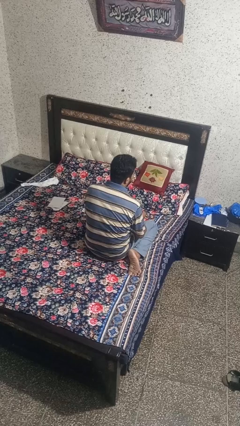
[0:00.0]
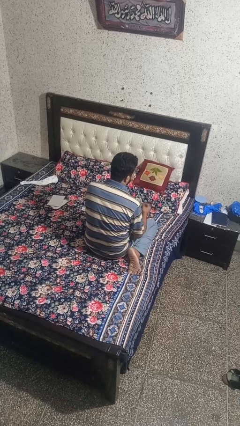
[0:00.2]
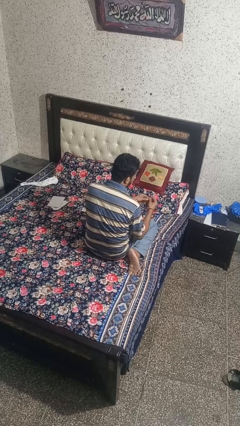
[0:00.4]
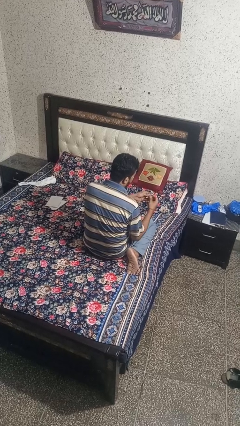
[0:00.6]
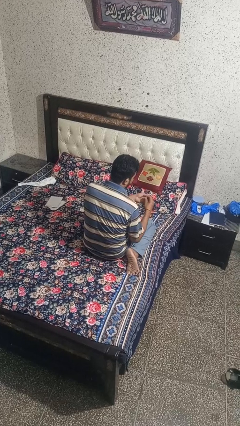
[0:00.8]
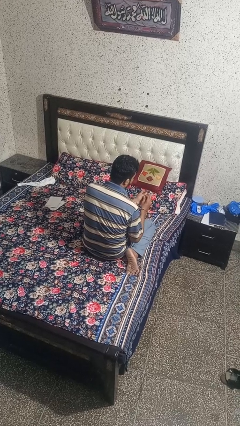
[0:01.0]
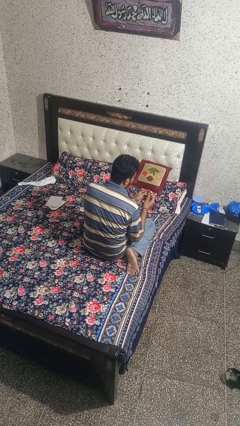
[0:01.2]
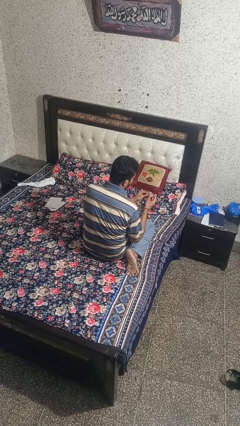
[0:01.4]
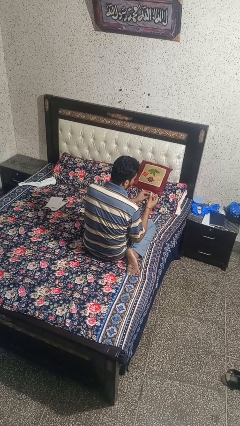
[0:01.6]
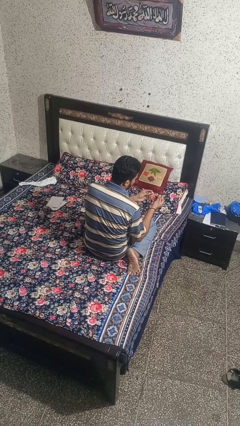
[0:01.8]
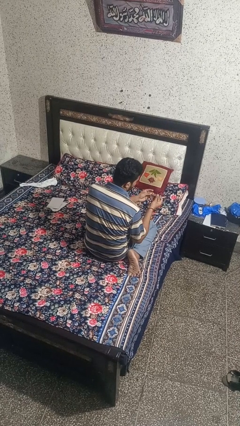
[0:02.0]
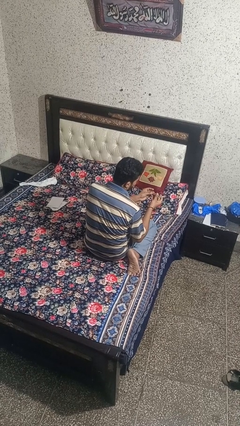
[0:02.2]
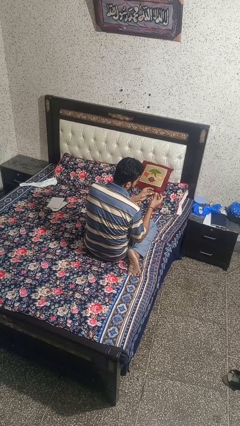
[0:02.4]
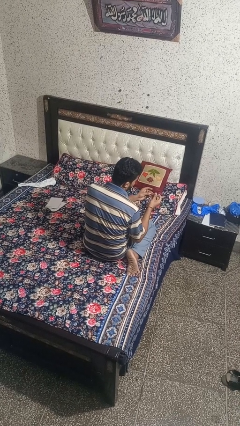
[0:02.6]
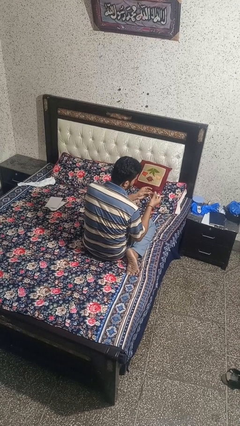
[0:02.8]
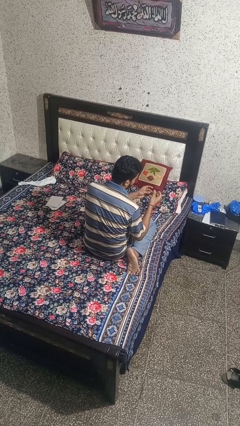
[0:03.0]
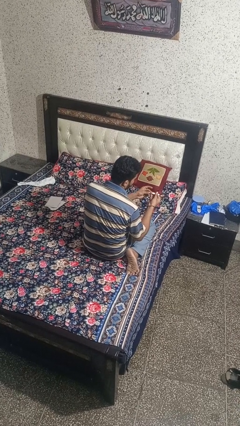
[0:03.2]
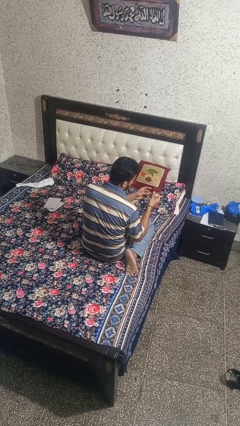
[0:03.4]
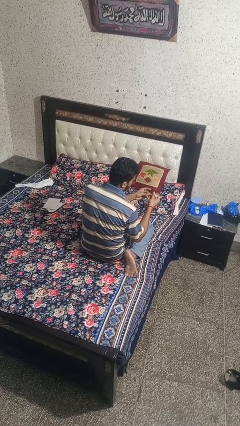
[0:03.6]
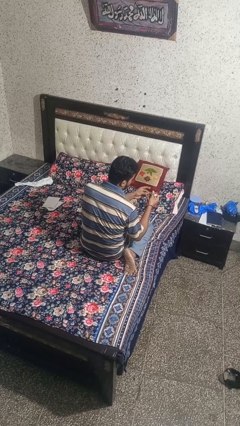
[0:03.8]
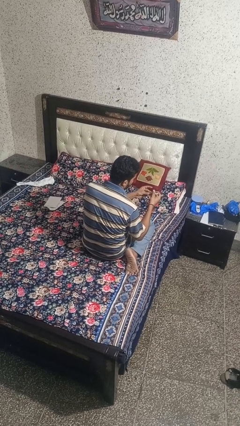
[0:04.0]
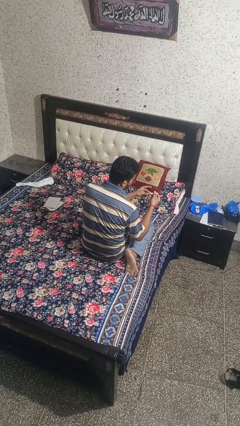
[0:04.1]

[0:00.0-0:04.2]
person clips fingernails

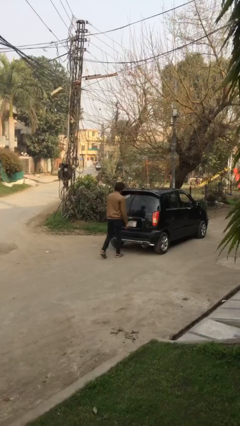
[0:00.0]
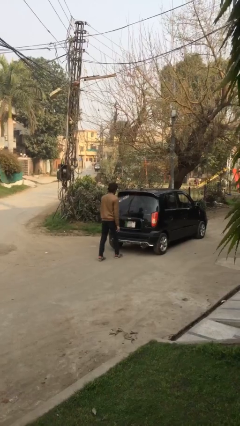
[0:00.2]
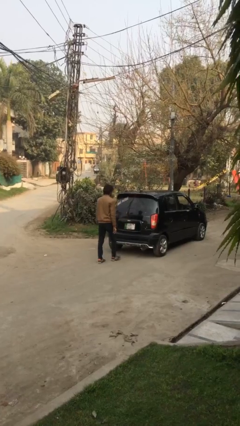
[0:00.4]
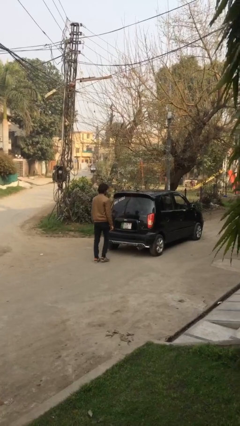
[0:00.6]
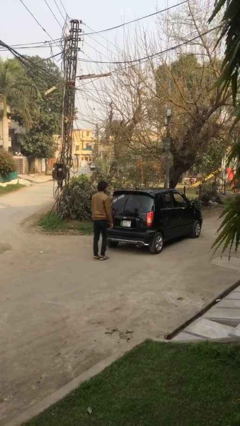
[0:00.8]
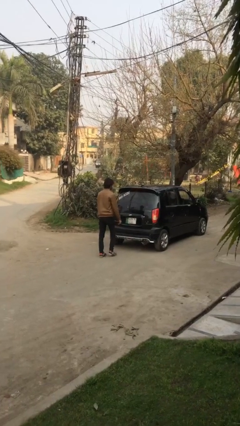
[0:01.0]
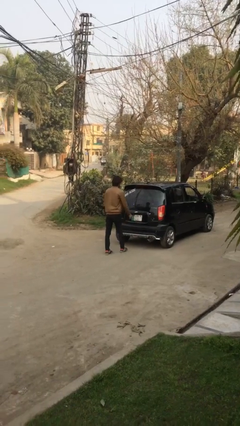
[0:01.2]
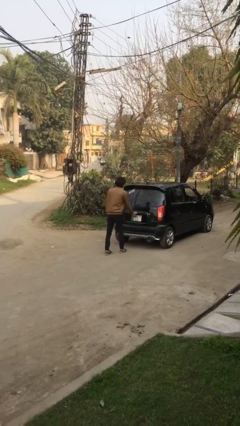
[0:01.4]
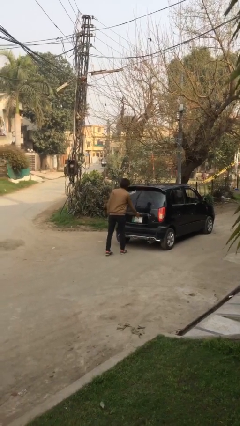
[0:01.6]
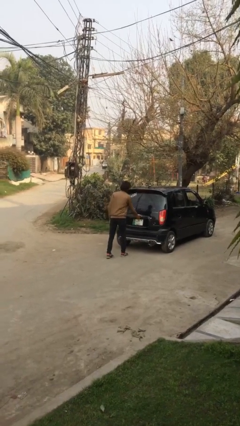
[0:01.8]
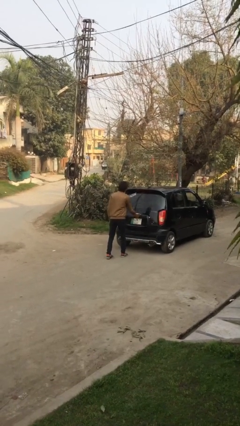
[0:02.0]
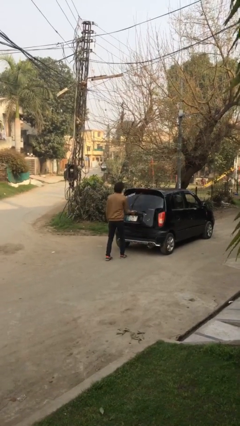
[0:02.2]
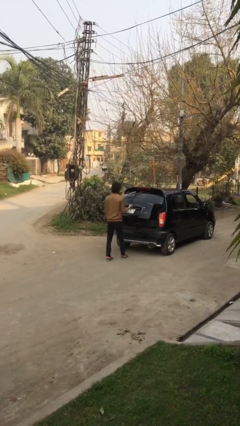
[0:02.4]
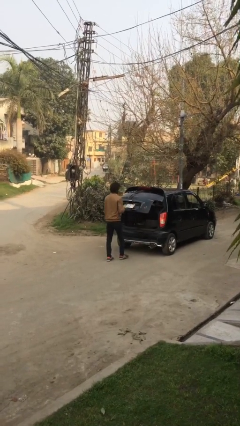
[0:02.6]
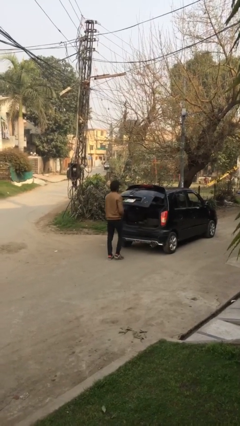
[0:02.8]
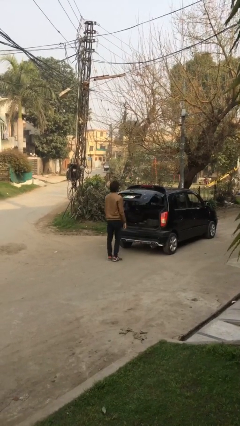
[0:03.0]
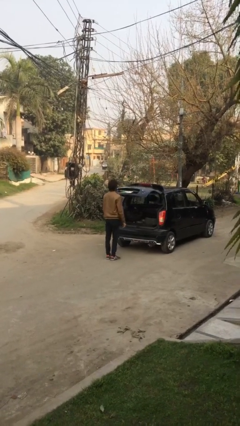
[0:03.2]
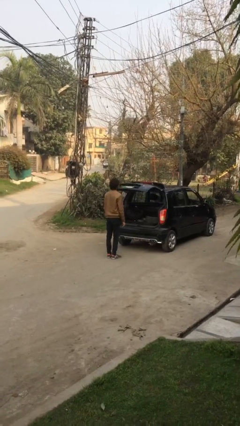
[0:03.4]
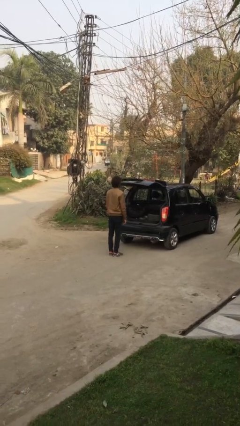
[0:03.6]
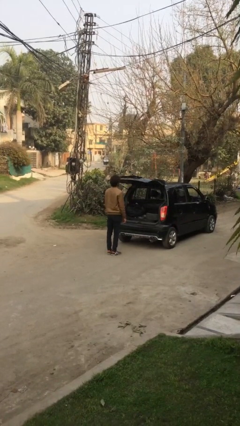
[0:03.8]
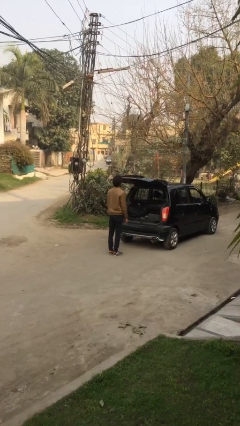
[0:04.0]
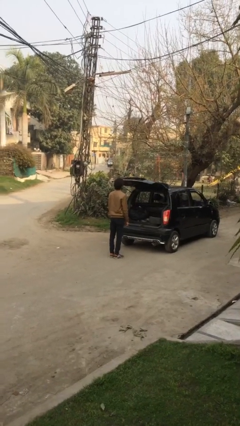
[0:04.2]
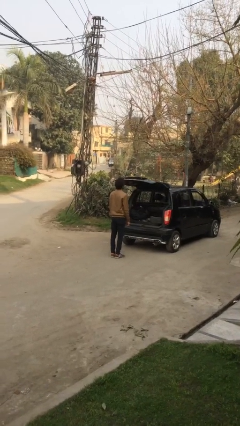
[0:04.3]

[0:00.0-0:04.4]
person opens car trunk

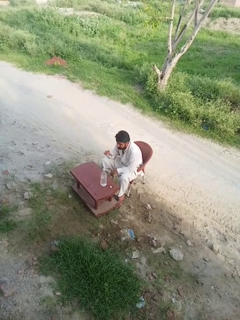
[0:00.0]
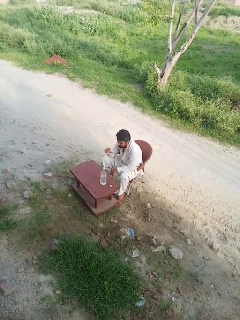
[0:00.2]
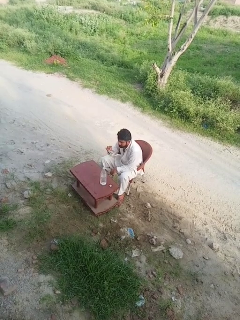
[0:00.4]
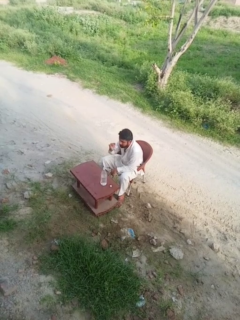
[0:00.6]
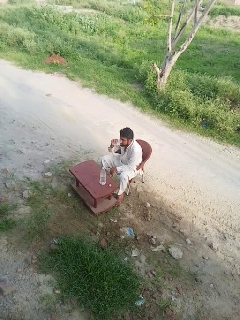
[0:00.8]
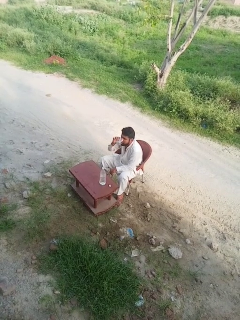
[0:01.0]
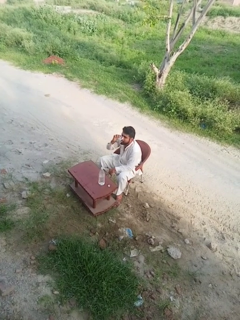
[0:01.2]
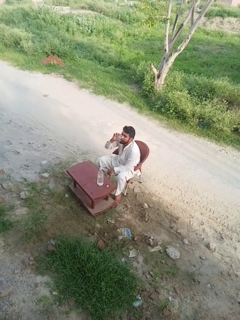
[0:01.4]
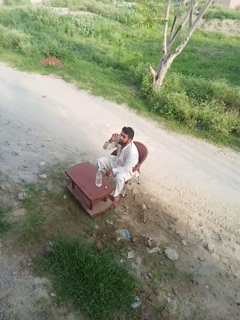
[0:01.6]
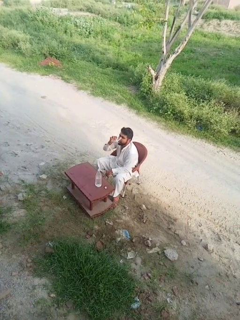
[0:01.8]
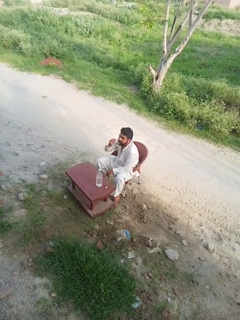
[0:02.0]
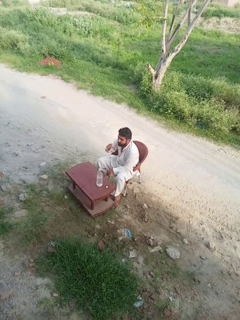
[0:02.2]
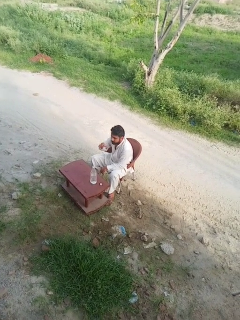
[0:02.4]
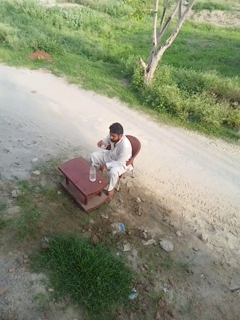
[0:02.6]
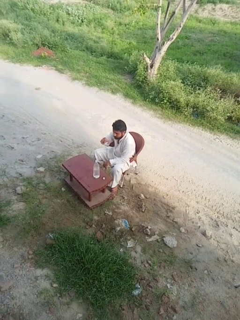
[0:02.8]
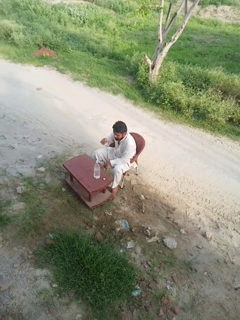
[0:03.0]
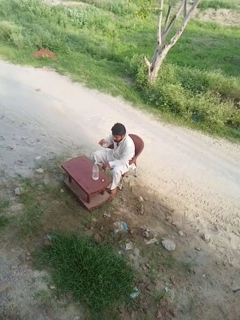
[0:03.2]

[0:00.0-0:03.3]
person drinks from shotglass

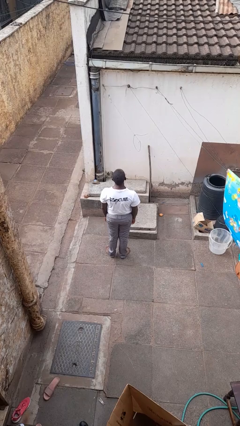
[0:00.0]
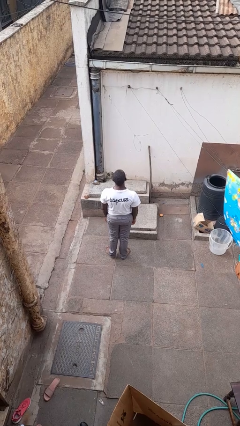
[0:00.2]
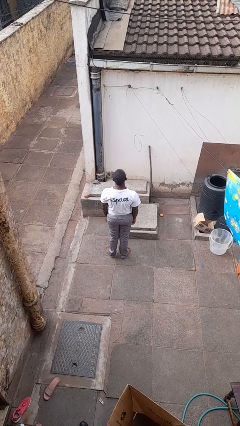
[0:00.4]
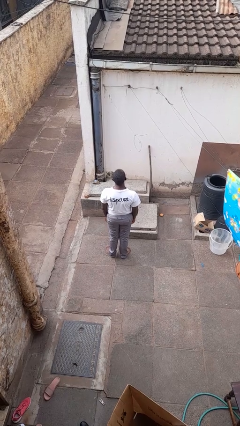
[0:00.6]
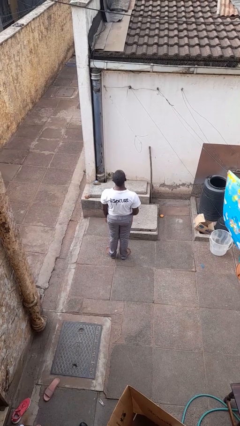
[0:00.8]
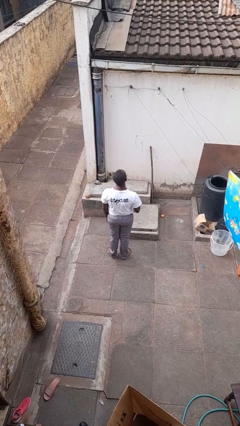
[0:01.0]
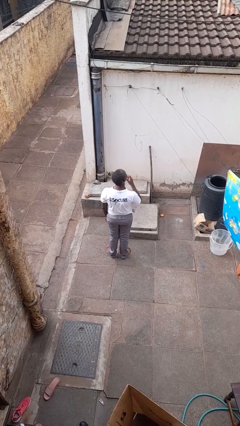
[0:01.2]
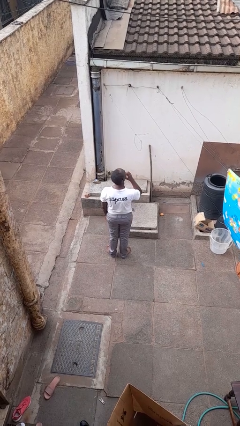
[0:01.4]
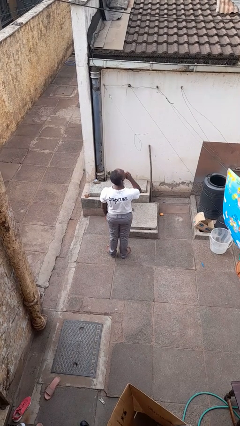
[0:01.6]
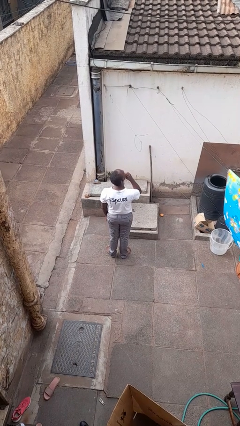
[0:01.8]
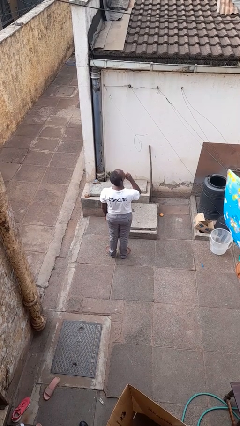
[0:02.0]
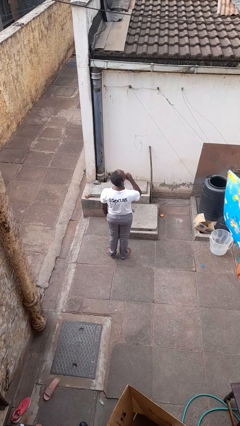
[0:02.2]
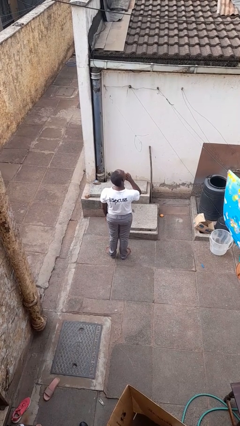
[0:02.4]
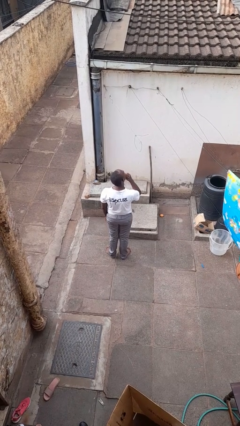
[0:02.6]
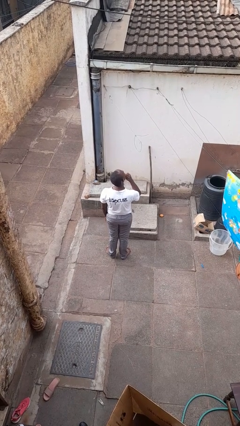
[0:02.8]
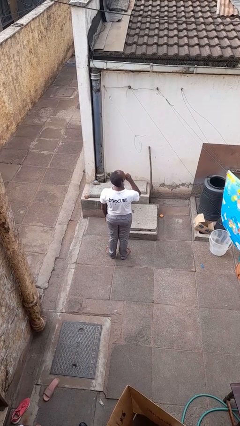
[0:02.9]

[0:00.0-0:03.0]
person strokes chin

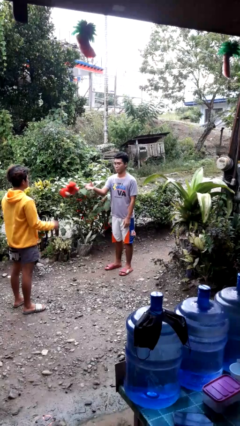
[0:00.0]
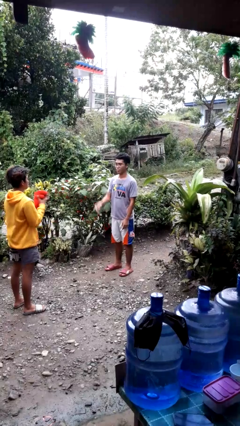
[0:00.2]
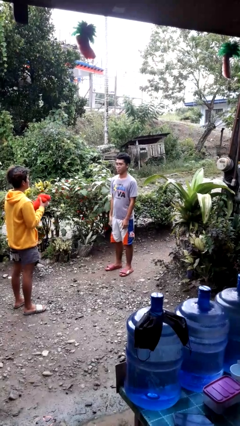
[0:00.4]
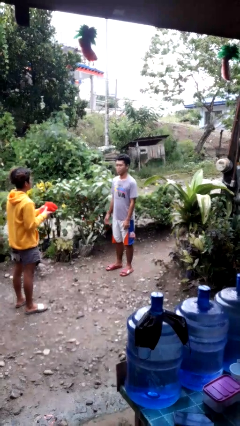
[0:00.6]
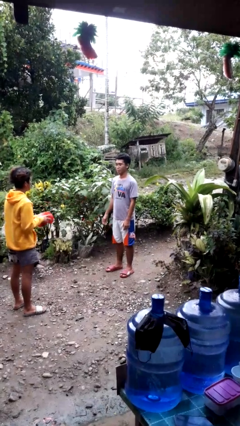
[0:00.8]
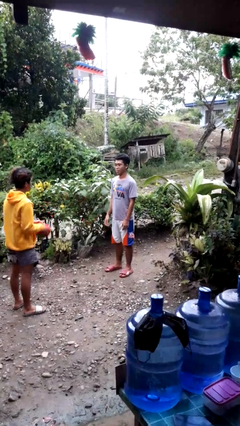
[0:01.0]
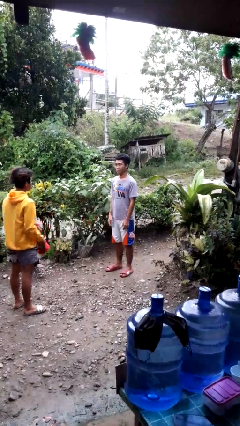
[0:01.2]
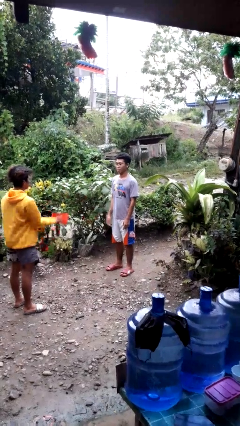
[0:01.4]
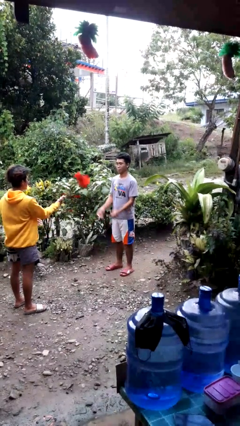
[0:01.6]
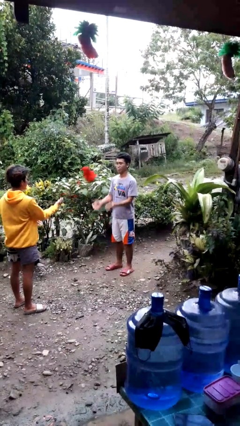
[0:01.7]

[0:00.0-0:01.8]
person throws object to person

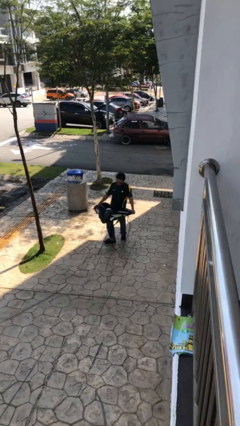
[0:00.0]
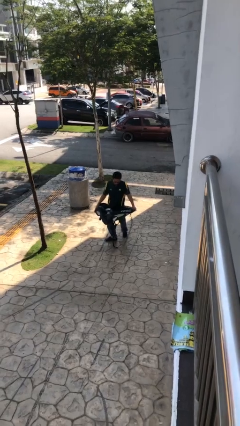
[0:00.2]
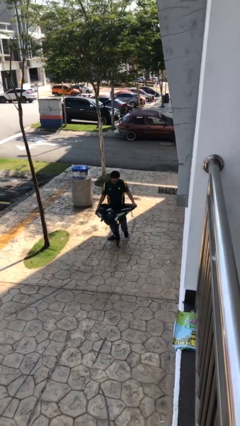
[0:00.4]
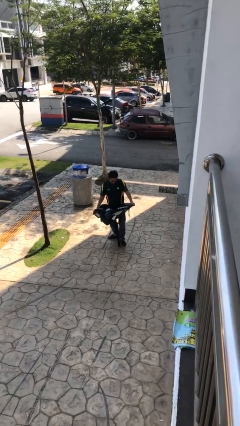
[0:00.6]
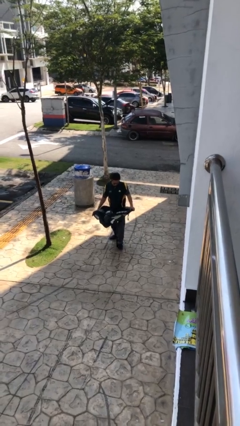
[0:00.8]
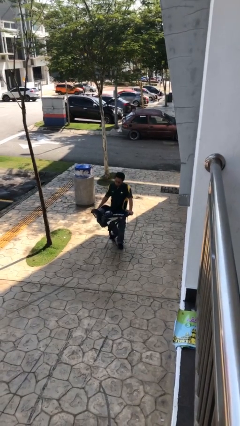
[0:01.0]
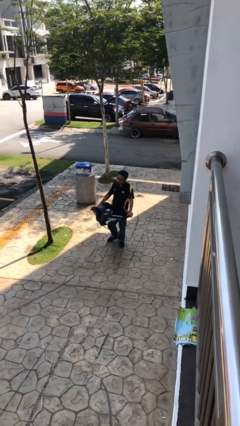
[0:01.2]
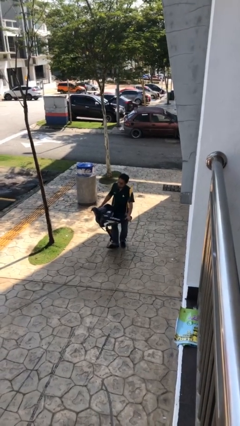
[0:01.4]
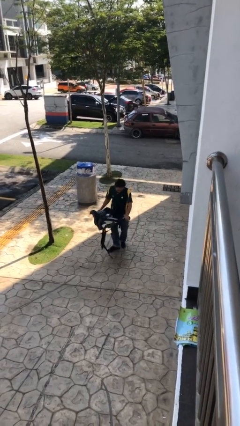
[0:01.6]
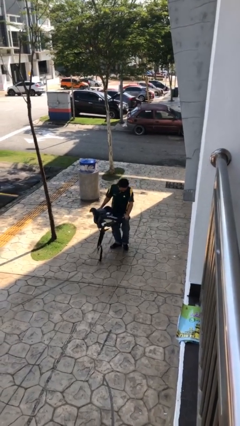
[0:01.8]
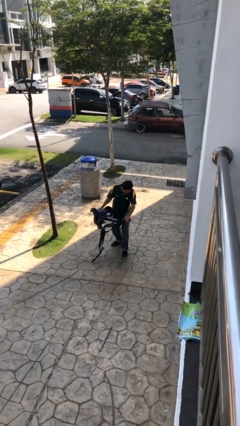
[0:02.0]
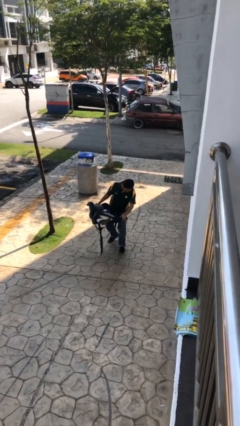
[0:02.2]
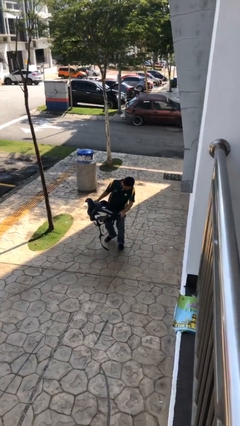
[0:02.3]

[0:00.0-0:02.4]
person carries heavy object
